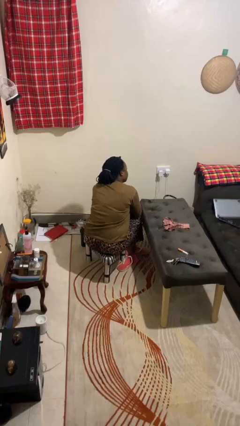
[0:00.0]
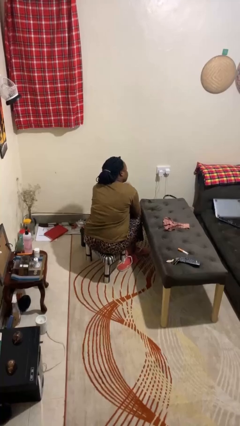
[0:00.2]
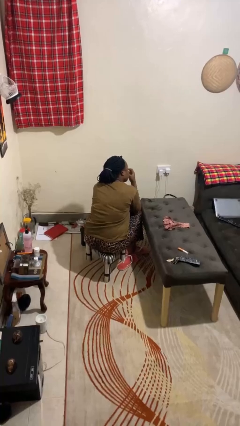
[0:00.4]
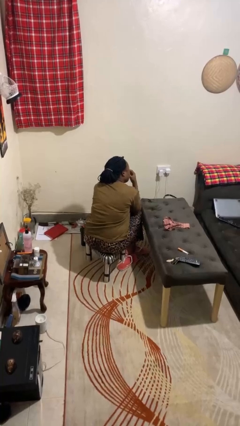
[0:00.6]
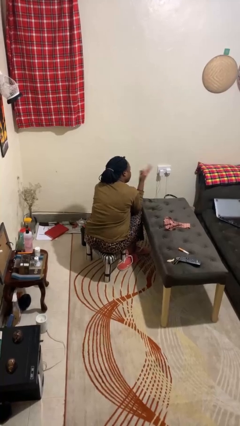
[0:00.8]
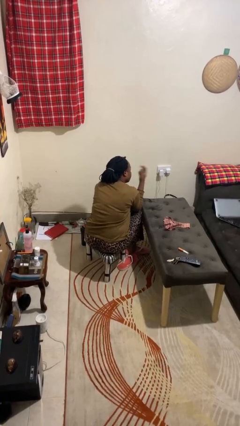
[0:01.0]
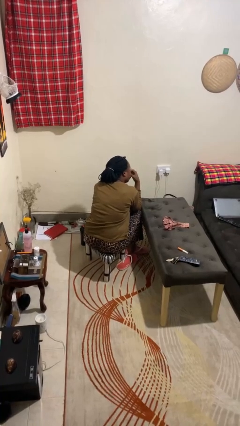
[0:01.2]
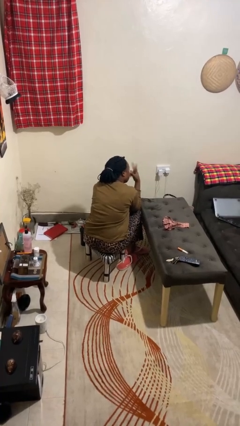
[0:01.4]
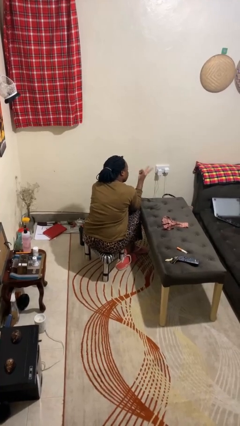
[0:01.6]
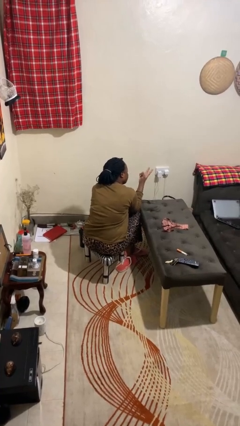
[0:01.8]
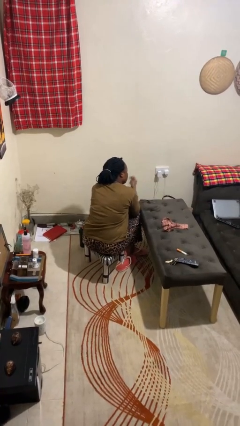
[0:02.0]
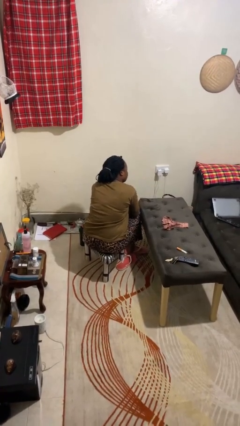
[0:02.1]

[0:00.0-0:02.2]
person gestures watch closely

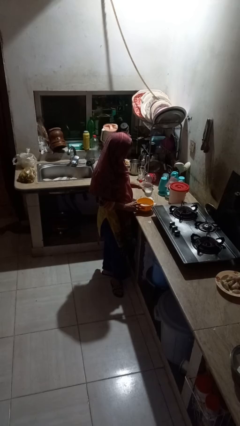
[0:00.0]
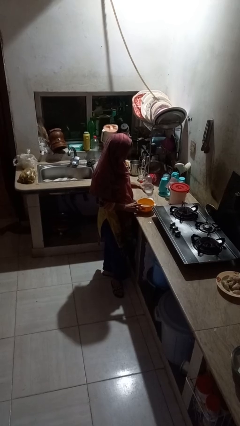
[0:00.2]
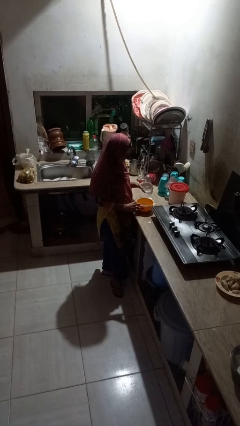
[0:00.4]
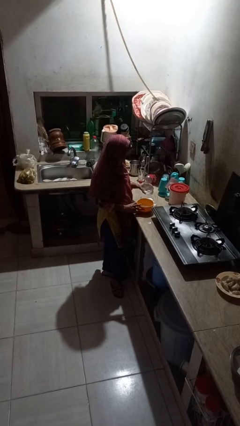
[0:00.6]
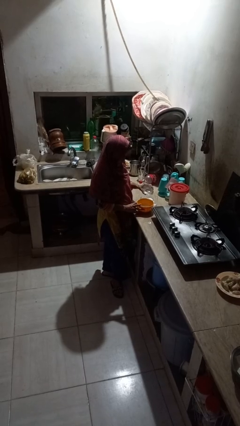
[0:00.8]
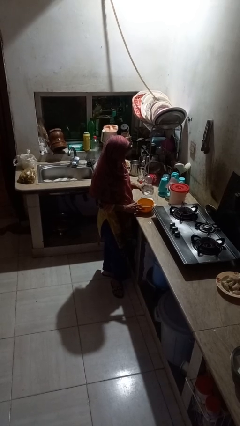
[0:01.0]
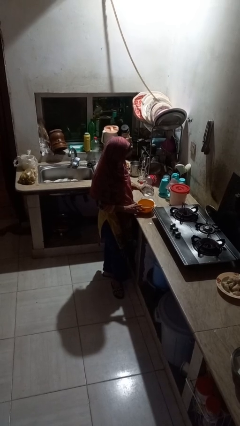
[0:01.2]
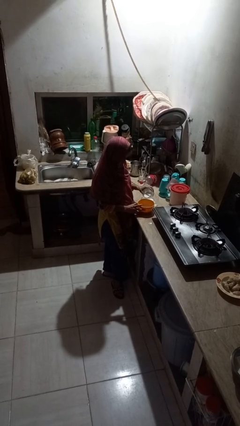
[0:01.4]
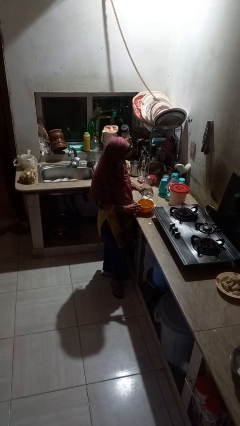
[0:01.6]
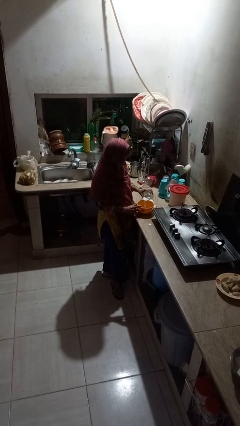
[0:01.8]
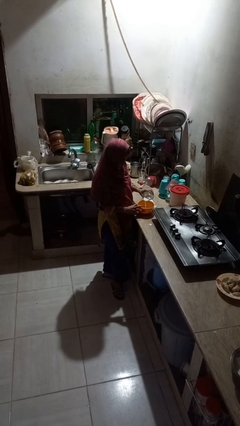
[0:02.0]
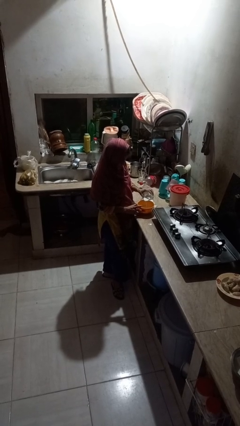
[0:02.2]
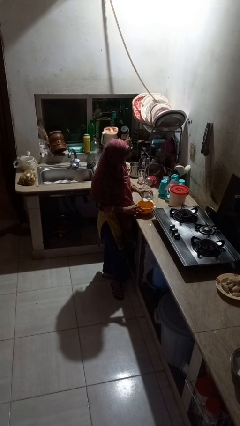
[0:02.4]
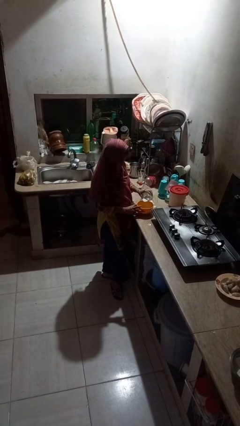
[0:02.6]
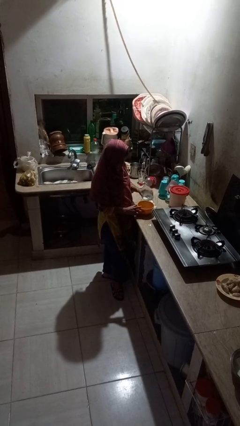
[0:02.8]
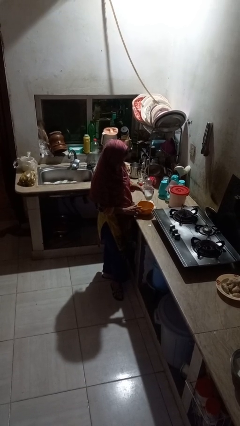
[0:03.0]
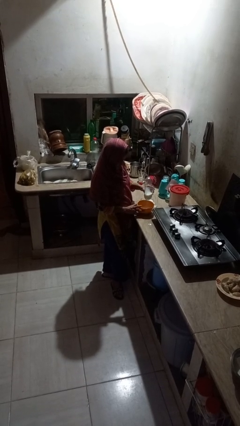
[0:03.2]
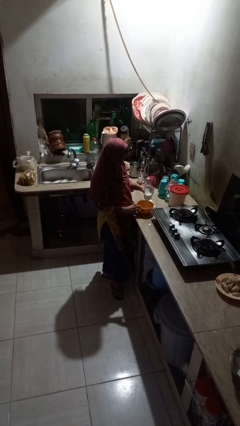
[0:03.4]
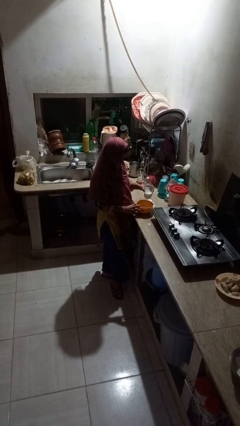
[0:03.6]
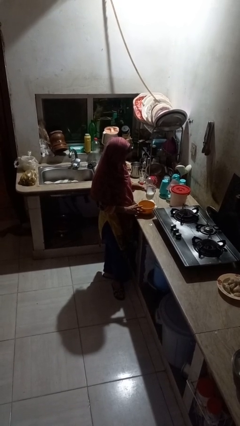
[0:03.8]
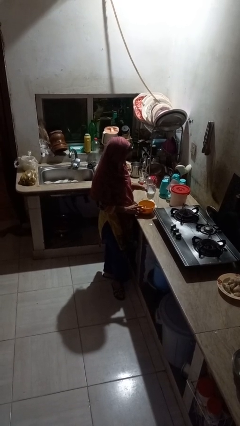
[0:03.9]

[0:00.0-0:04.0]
person pours into bowl

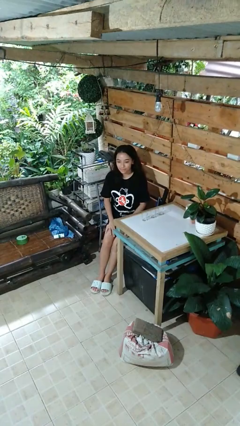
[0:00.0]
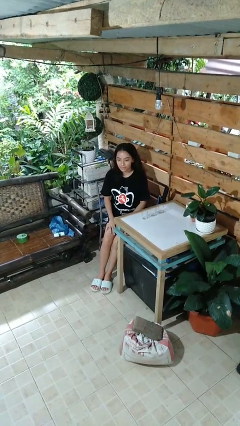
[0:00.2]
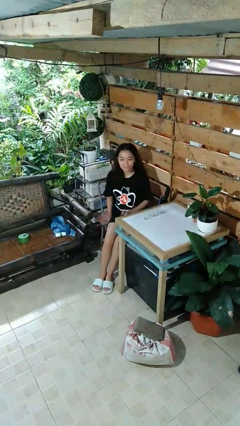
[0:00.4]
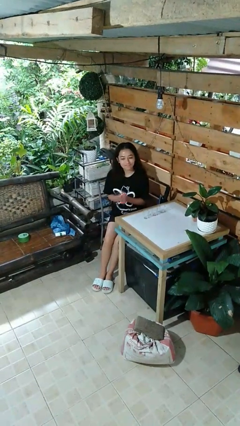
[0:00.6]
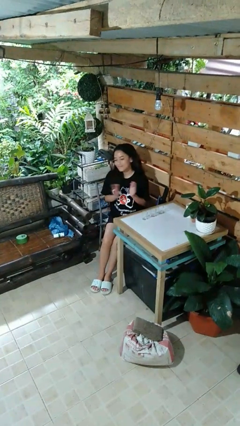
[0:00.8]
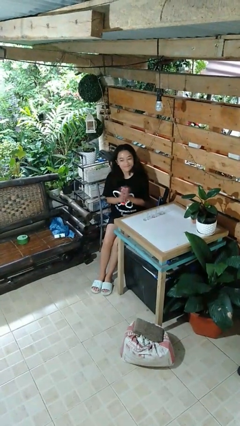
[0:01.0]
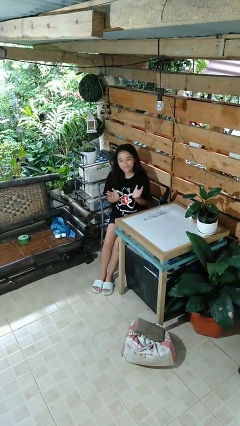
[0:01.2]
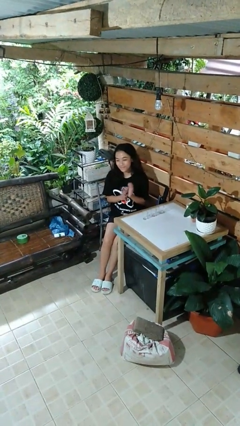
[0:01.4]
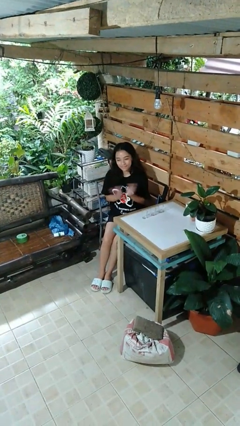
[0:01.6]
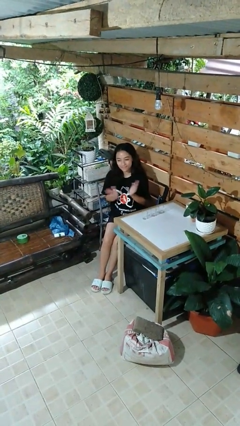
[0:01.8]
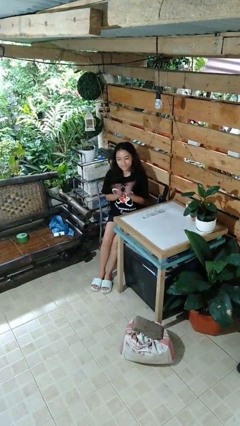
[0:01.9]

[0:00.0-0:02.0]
person claps hands

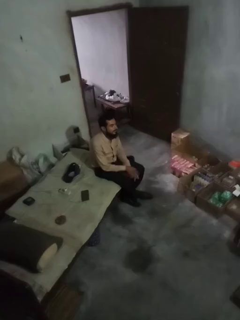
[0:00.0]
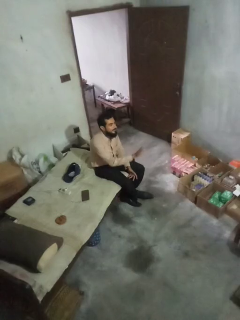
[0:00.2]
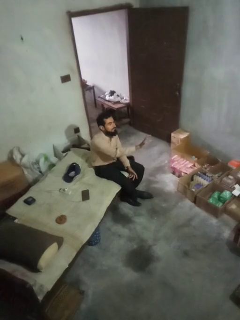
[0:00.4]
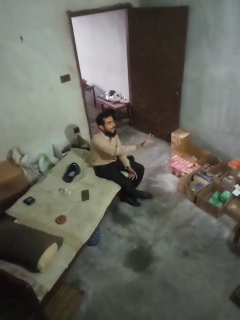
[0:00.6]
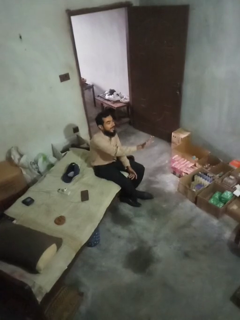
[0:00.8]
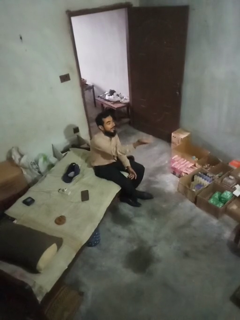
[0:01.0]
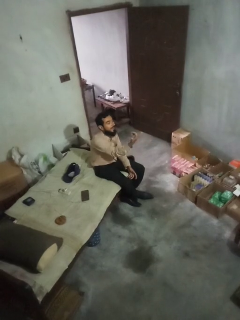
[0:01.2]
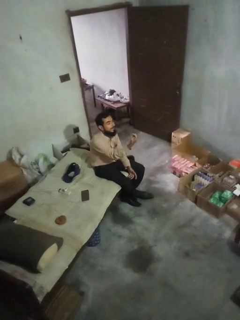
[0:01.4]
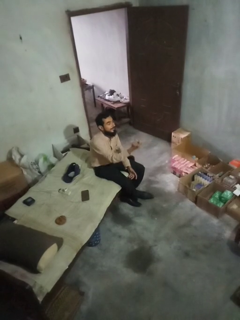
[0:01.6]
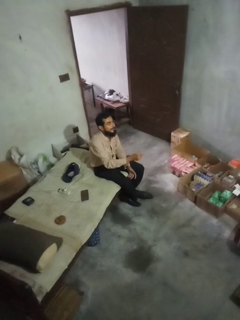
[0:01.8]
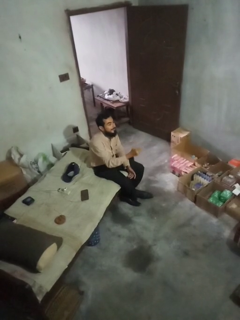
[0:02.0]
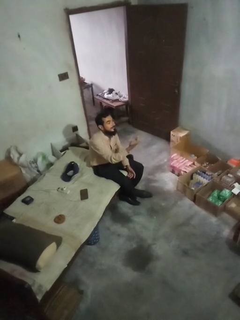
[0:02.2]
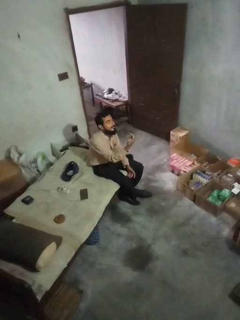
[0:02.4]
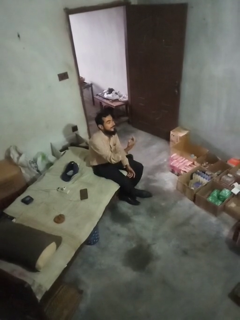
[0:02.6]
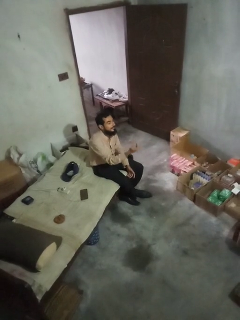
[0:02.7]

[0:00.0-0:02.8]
person gestures raise hand

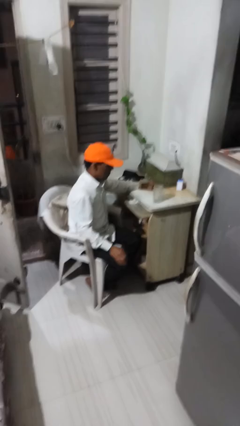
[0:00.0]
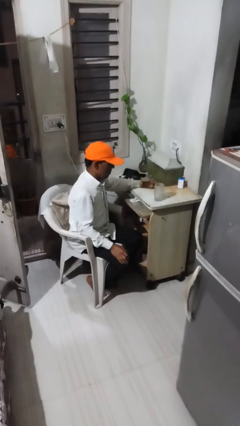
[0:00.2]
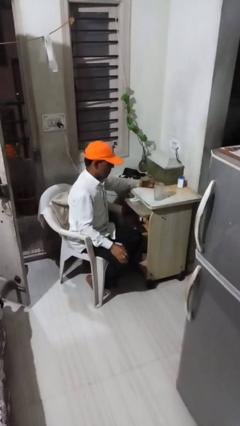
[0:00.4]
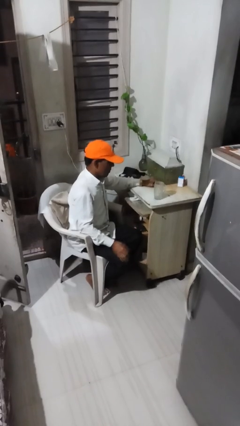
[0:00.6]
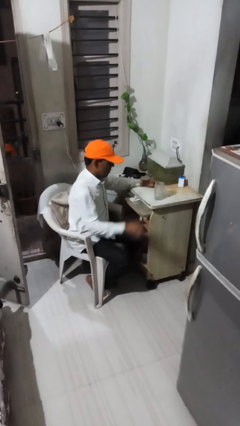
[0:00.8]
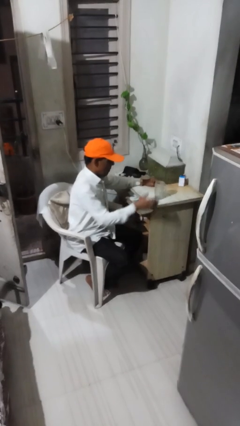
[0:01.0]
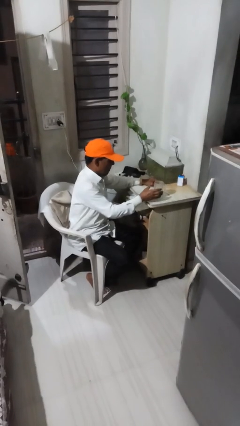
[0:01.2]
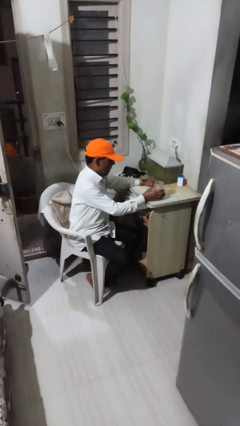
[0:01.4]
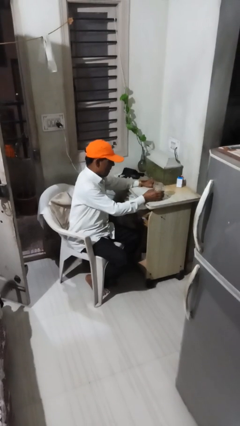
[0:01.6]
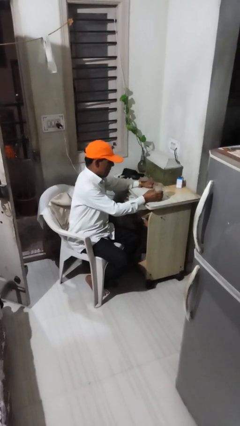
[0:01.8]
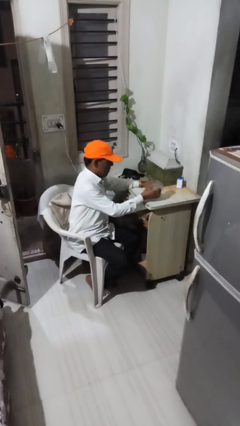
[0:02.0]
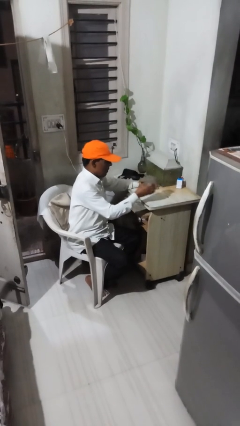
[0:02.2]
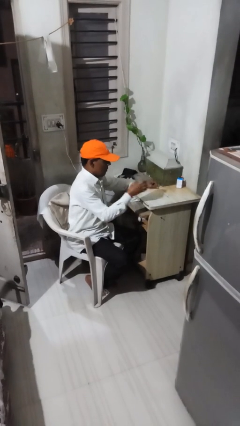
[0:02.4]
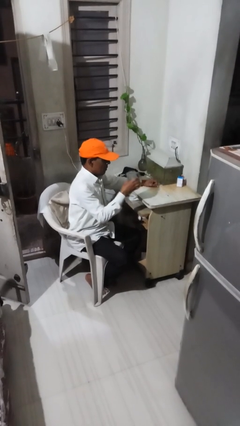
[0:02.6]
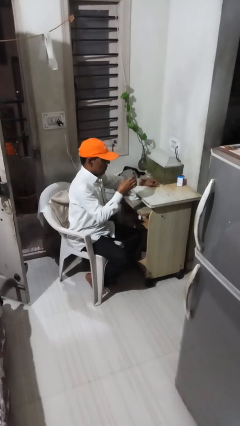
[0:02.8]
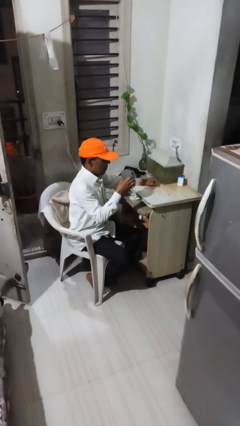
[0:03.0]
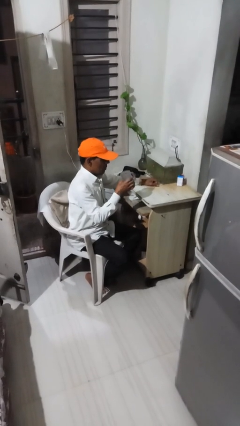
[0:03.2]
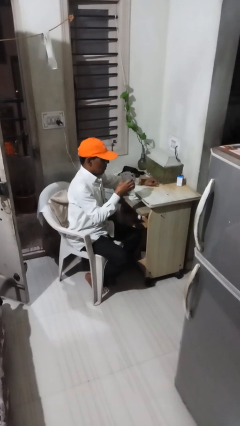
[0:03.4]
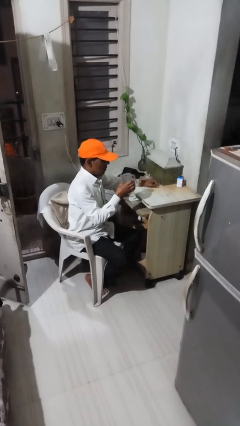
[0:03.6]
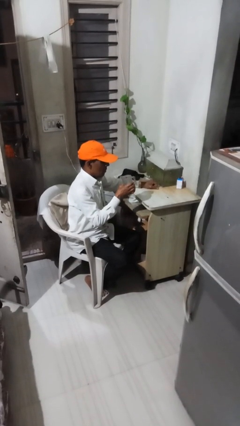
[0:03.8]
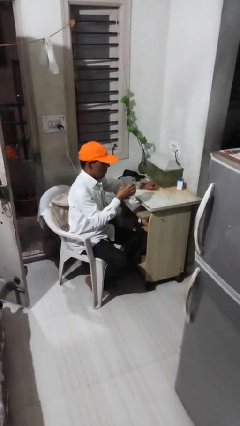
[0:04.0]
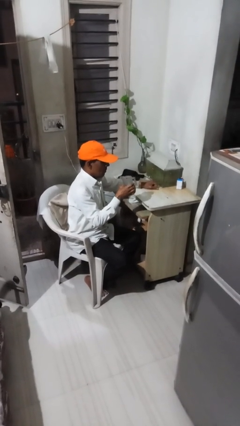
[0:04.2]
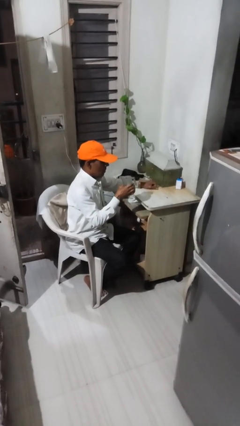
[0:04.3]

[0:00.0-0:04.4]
person picks up object from table

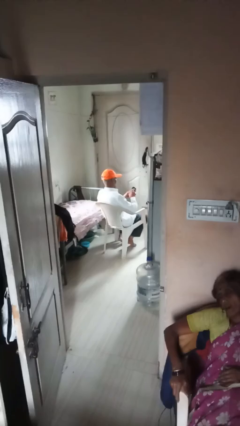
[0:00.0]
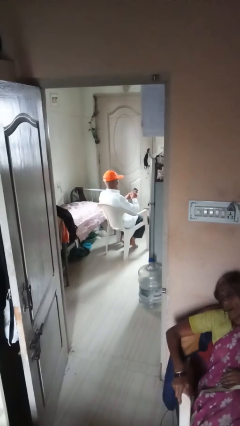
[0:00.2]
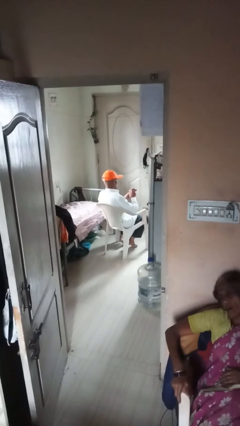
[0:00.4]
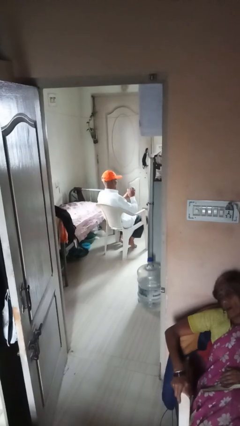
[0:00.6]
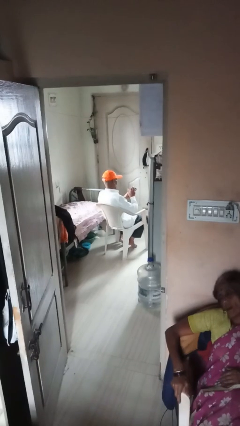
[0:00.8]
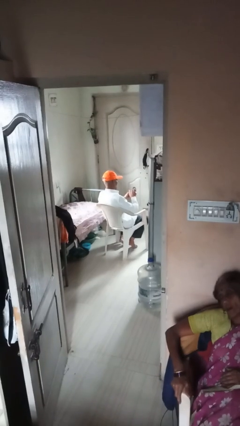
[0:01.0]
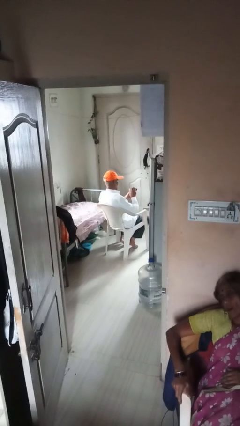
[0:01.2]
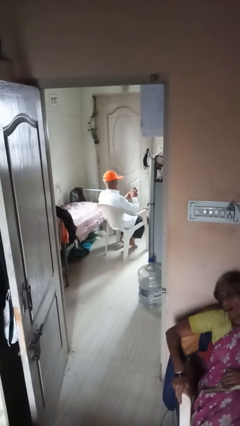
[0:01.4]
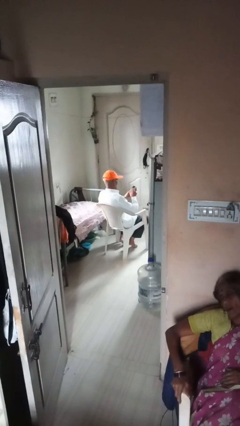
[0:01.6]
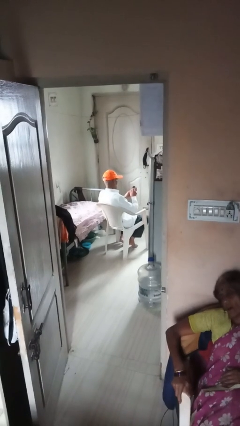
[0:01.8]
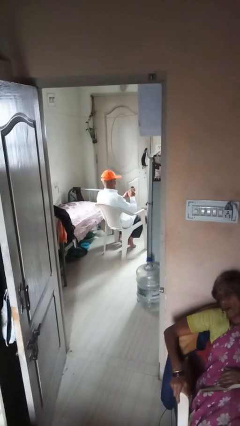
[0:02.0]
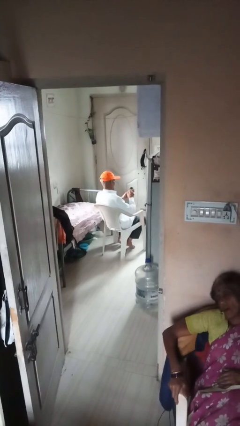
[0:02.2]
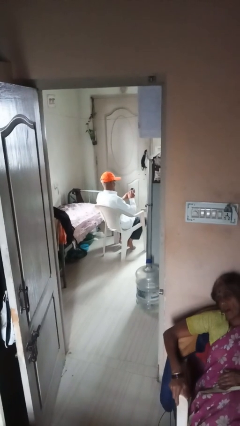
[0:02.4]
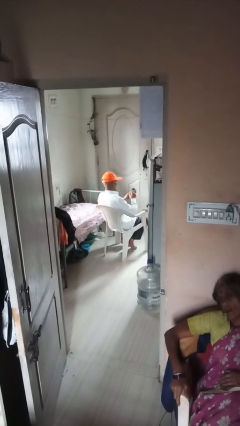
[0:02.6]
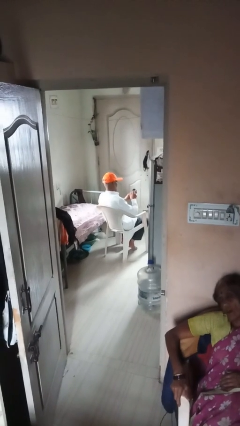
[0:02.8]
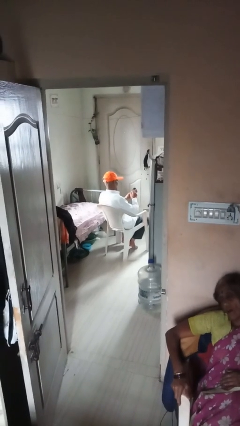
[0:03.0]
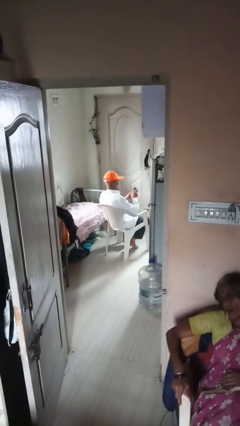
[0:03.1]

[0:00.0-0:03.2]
person taps object with finger
